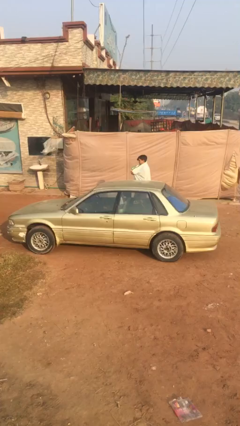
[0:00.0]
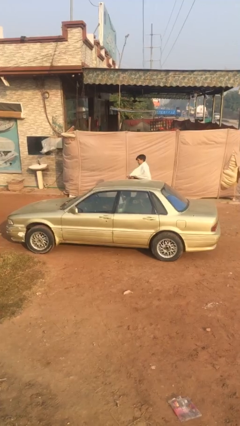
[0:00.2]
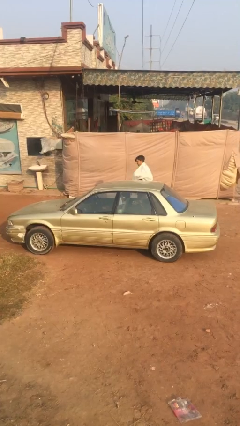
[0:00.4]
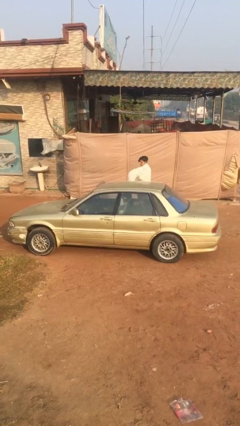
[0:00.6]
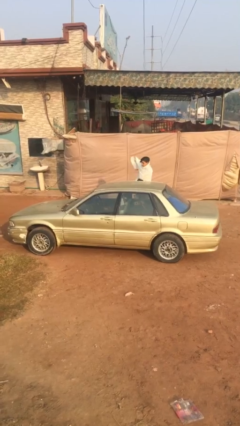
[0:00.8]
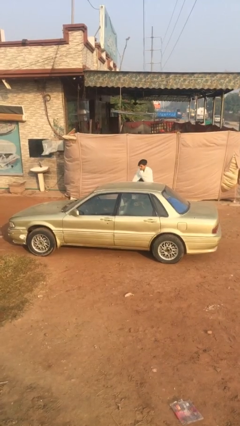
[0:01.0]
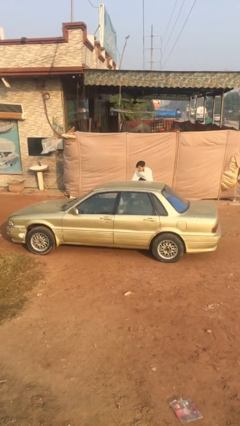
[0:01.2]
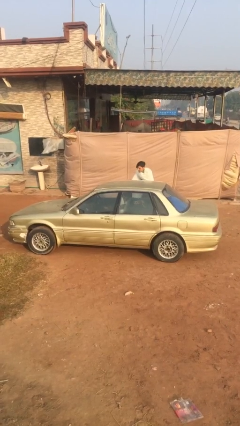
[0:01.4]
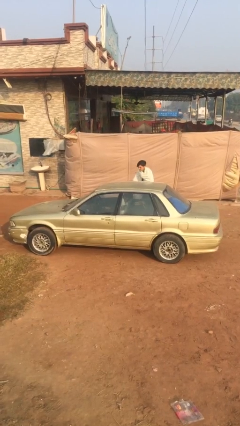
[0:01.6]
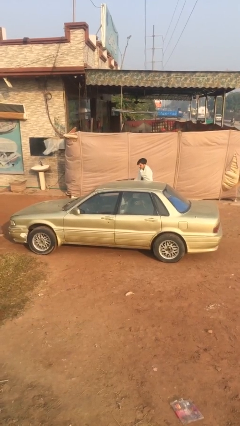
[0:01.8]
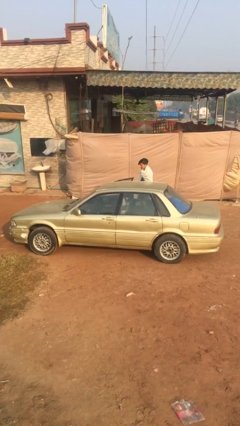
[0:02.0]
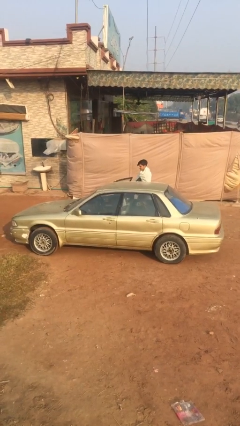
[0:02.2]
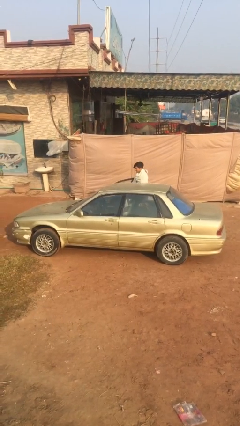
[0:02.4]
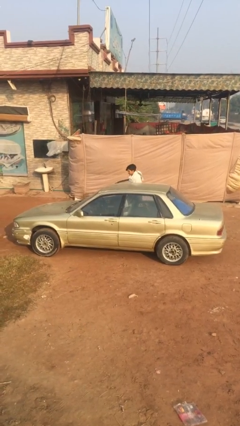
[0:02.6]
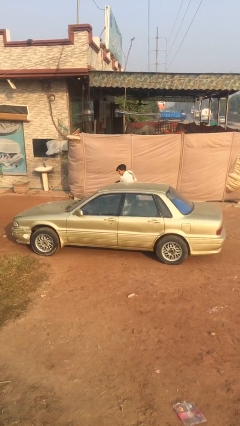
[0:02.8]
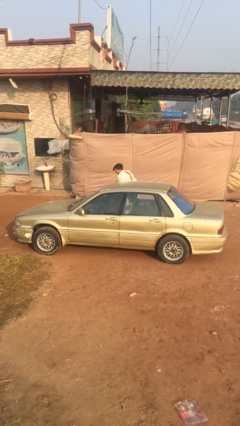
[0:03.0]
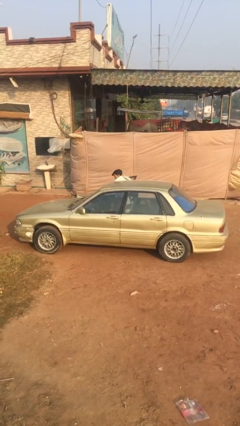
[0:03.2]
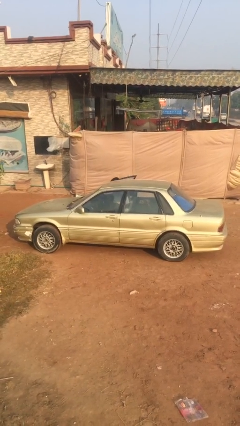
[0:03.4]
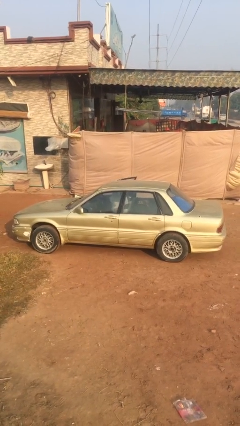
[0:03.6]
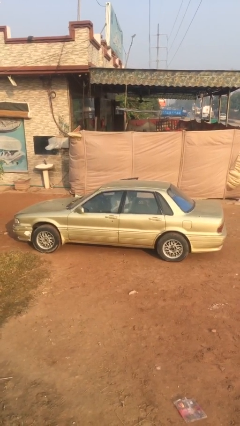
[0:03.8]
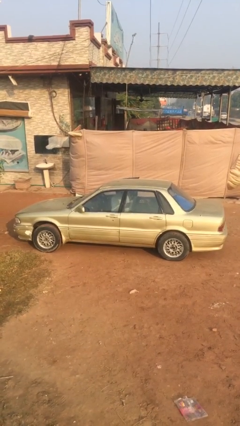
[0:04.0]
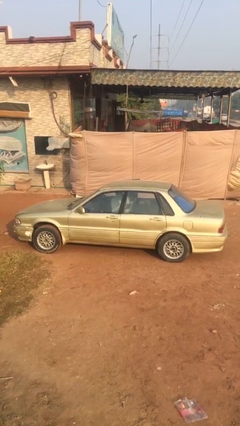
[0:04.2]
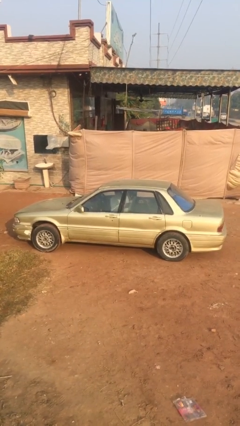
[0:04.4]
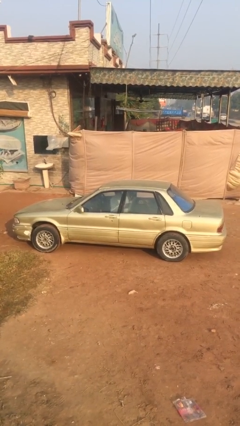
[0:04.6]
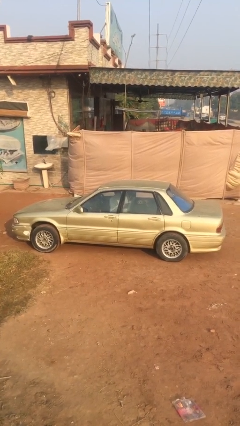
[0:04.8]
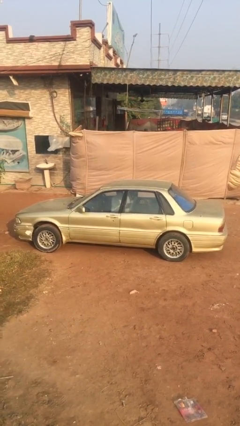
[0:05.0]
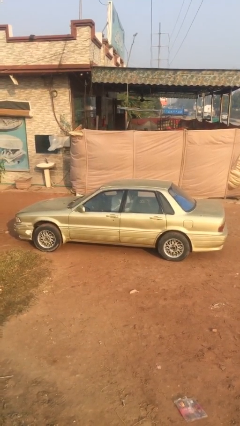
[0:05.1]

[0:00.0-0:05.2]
car picks up person

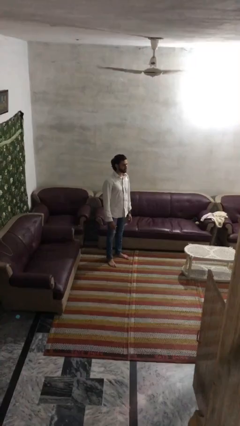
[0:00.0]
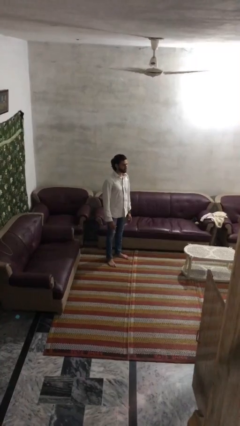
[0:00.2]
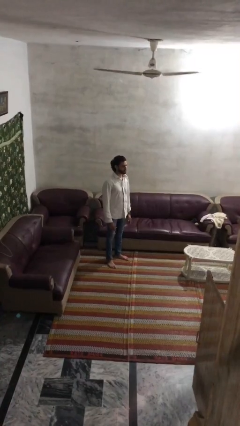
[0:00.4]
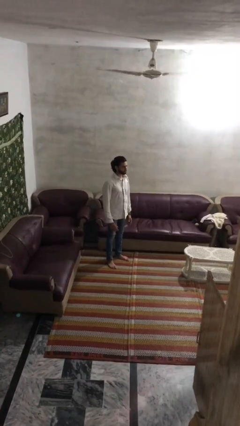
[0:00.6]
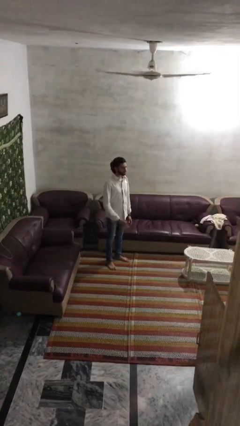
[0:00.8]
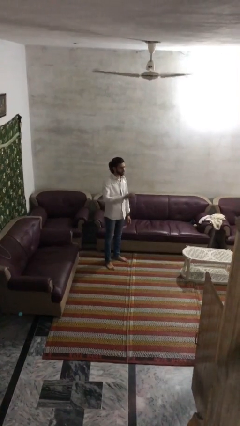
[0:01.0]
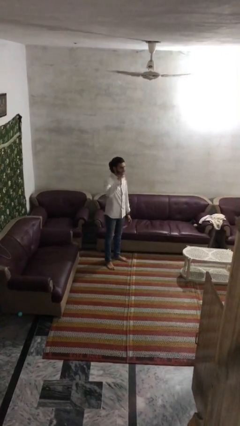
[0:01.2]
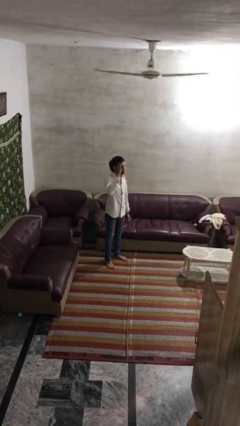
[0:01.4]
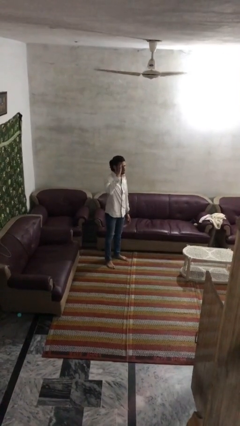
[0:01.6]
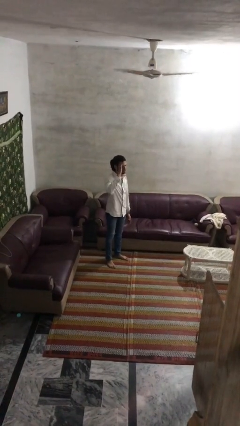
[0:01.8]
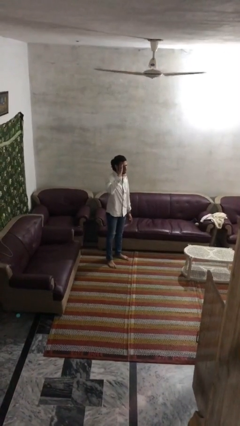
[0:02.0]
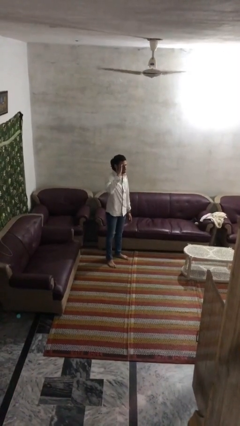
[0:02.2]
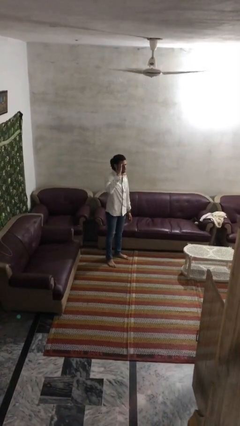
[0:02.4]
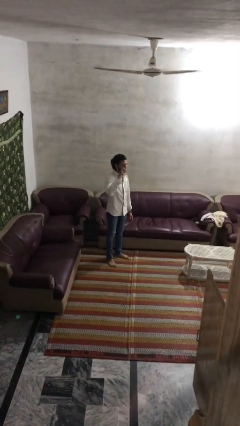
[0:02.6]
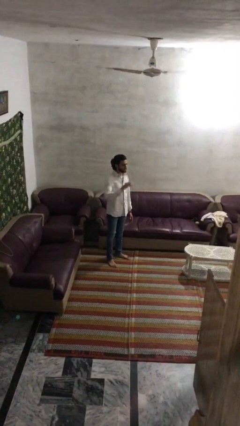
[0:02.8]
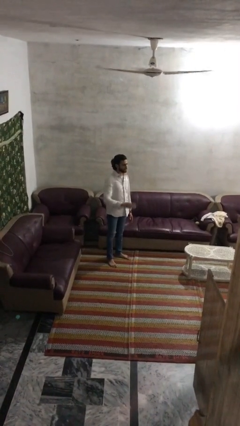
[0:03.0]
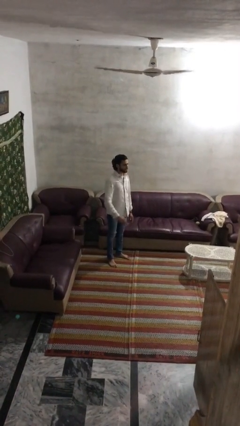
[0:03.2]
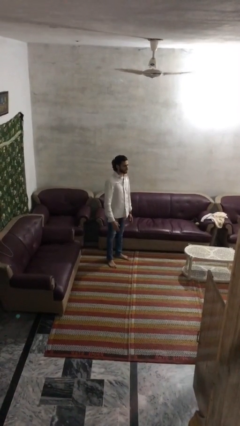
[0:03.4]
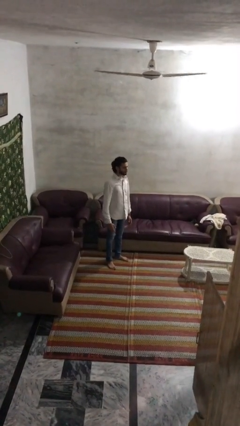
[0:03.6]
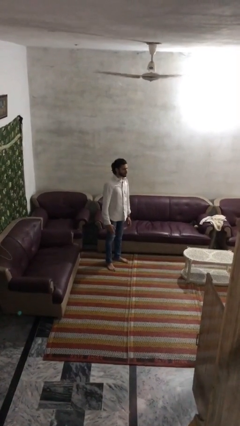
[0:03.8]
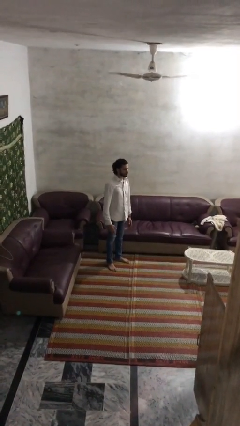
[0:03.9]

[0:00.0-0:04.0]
person salutes

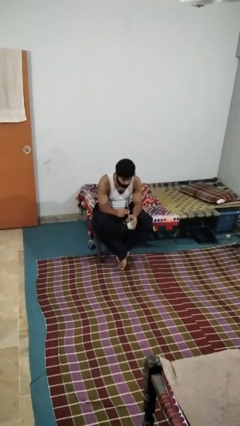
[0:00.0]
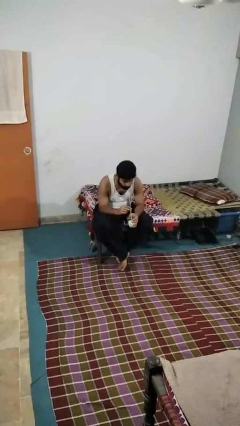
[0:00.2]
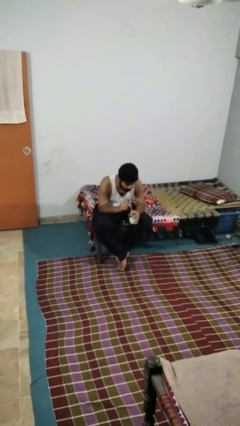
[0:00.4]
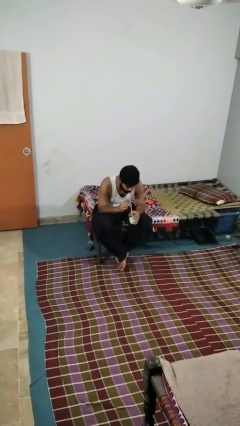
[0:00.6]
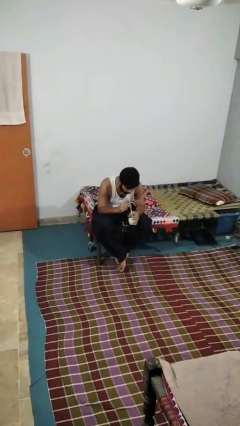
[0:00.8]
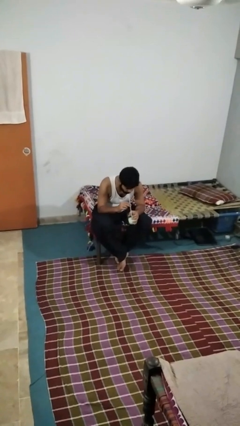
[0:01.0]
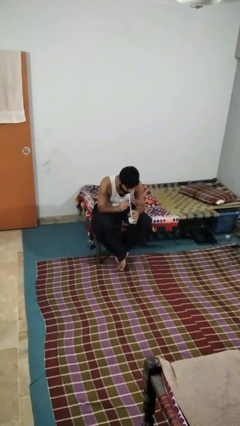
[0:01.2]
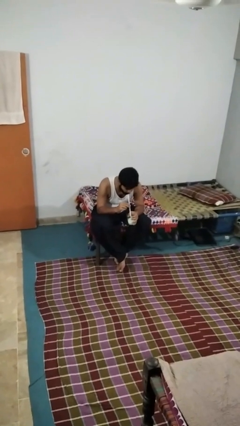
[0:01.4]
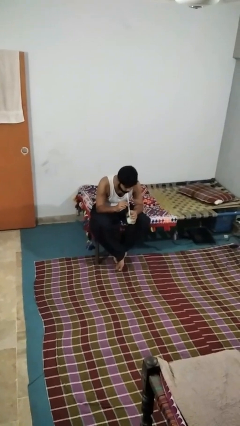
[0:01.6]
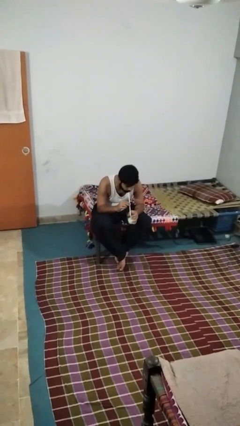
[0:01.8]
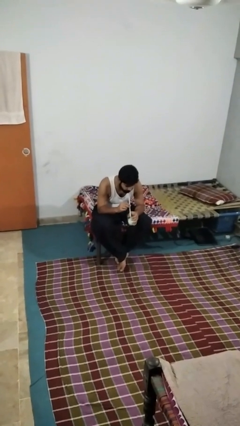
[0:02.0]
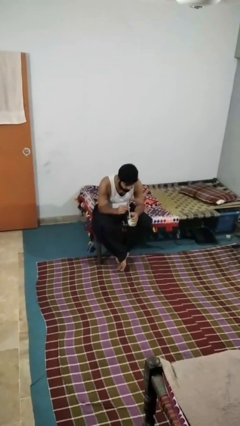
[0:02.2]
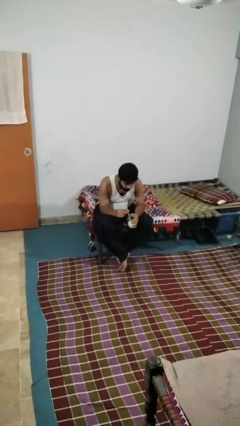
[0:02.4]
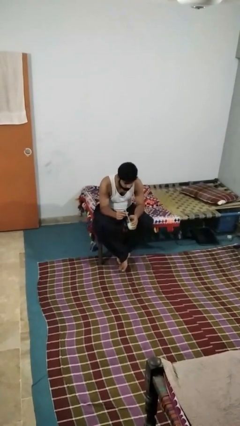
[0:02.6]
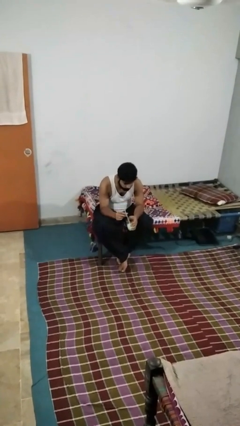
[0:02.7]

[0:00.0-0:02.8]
person drinks from straw

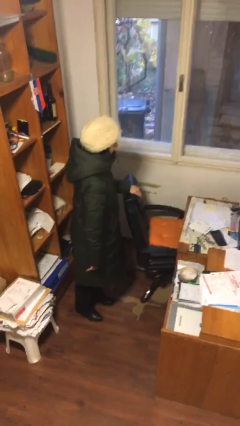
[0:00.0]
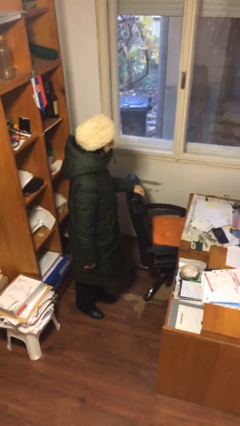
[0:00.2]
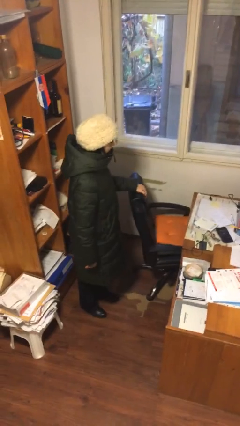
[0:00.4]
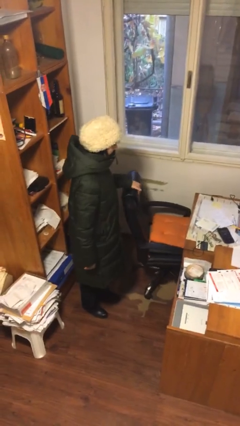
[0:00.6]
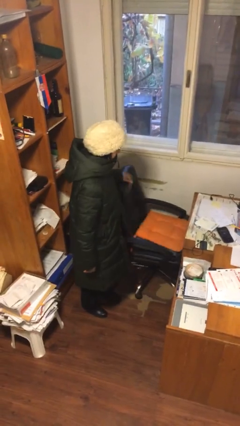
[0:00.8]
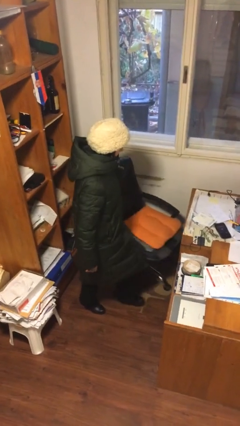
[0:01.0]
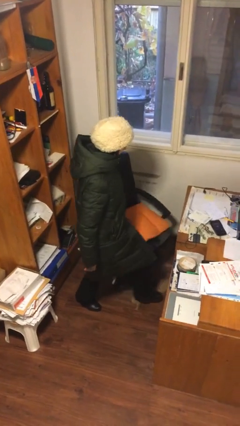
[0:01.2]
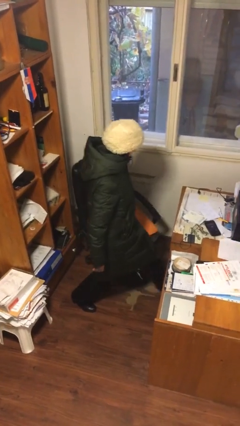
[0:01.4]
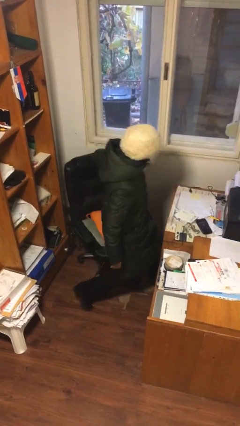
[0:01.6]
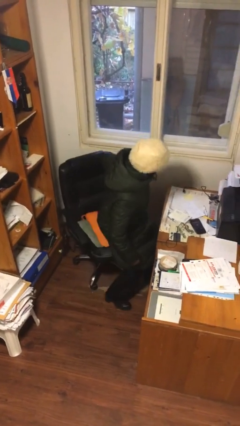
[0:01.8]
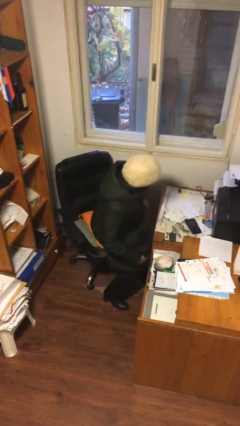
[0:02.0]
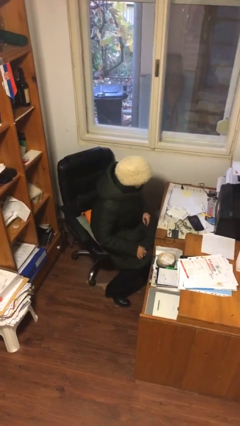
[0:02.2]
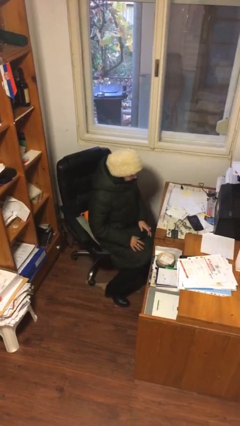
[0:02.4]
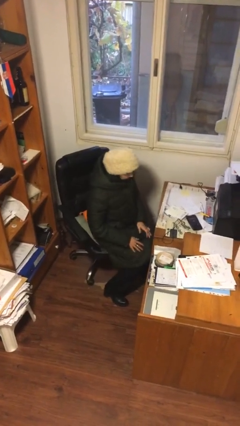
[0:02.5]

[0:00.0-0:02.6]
person sits down

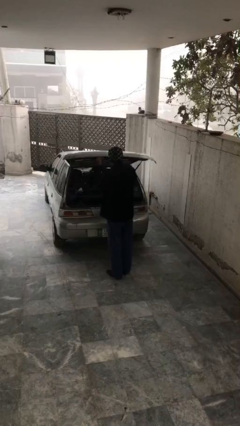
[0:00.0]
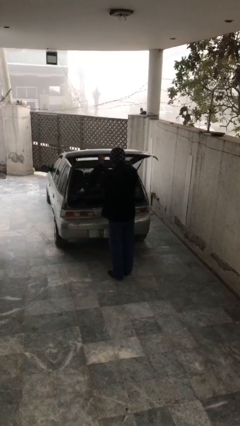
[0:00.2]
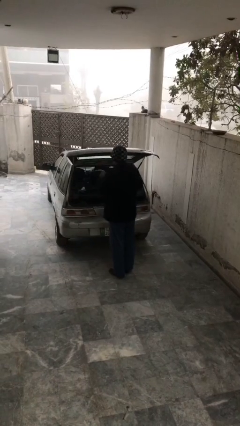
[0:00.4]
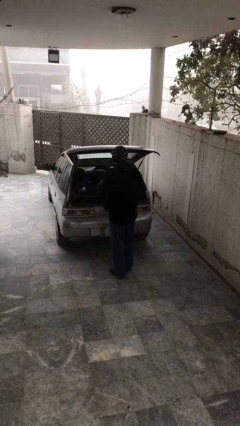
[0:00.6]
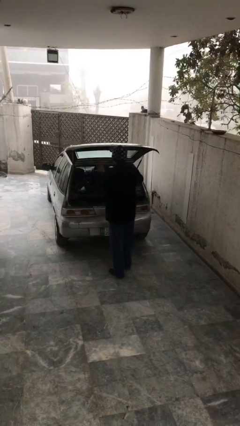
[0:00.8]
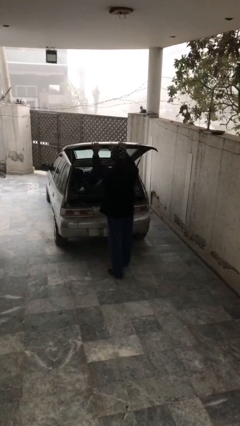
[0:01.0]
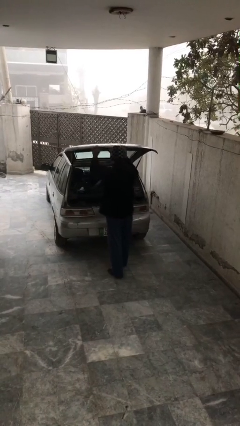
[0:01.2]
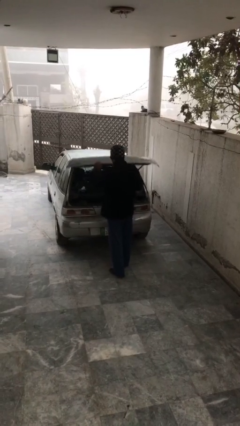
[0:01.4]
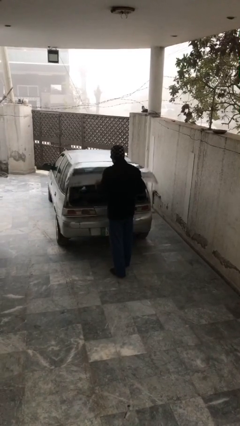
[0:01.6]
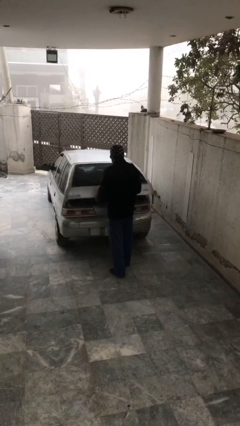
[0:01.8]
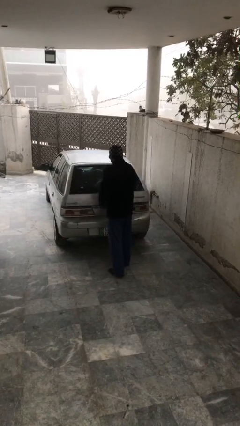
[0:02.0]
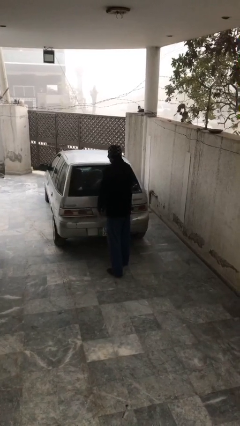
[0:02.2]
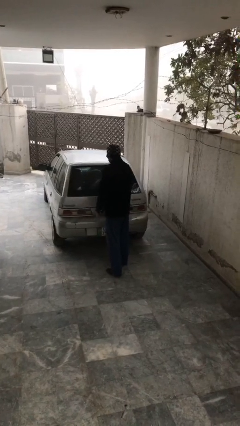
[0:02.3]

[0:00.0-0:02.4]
person closes car trunk

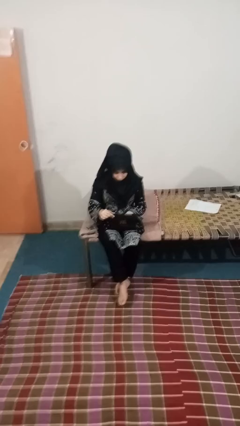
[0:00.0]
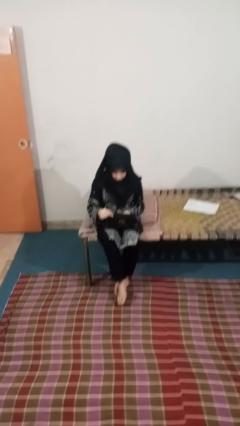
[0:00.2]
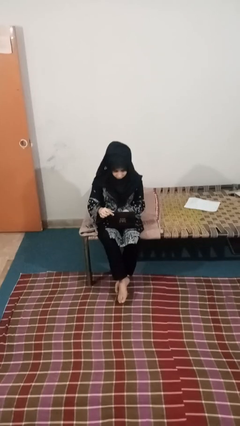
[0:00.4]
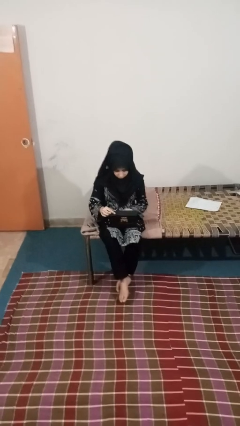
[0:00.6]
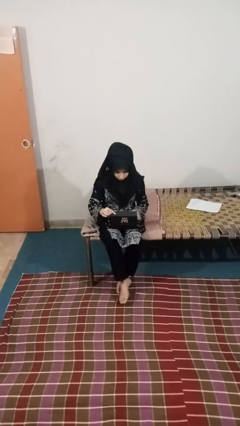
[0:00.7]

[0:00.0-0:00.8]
person opens jewelry box
